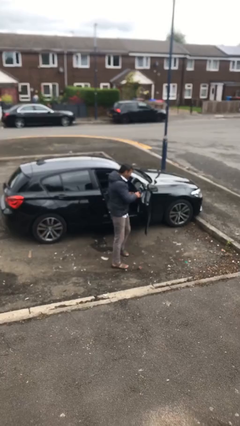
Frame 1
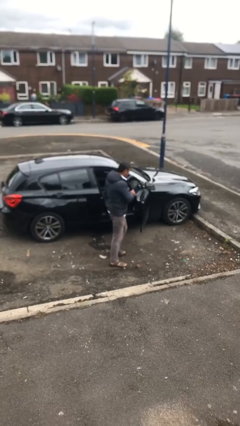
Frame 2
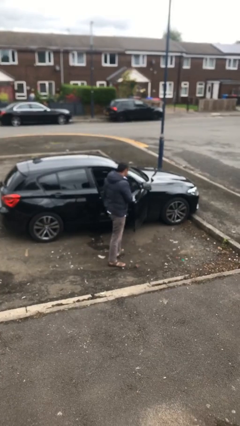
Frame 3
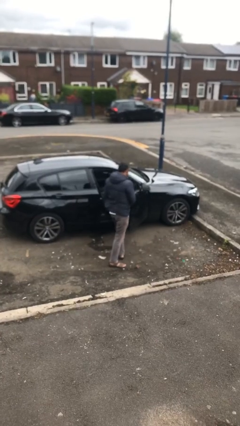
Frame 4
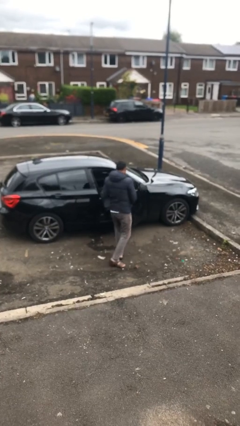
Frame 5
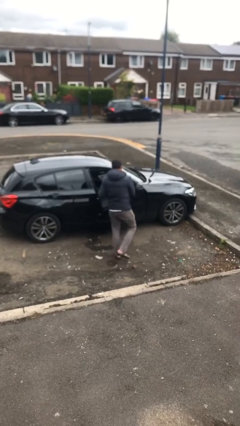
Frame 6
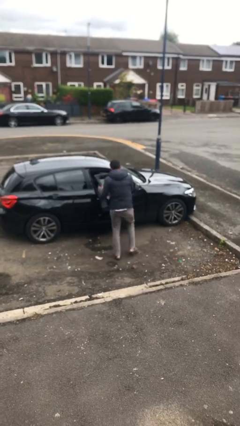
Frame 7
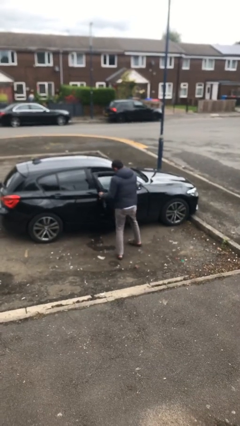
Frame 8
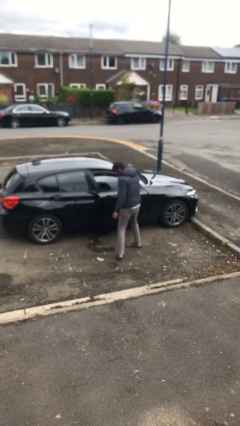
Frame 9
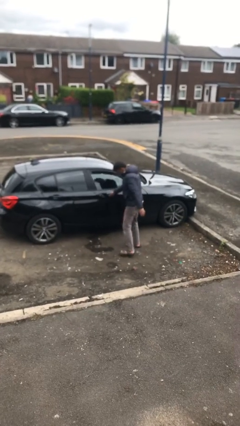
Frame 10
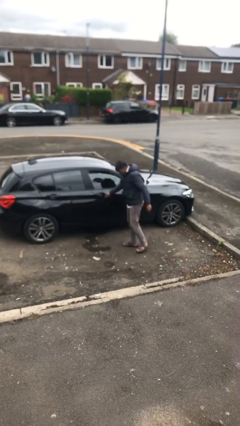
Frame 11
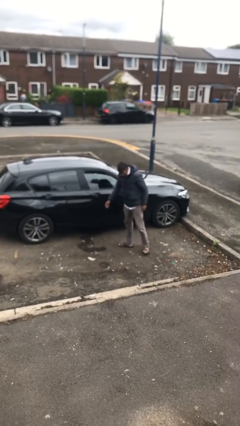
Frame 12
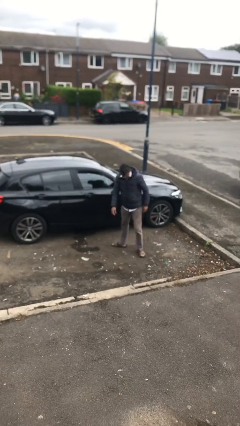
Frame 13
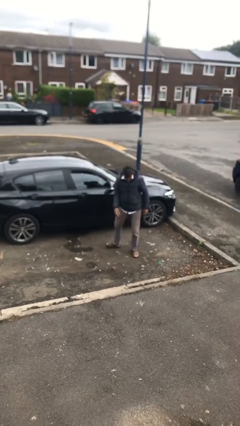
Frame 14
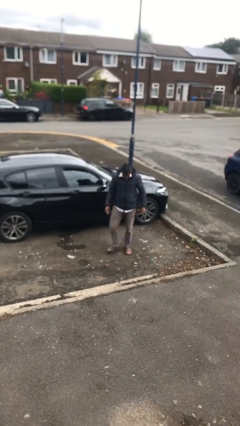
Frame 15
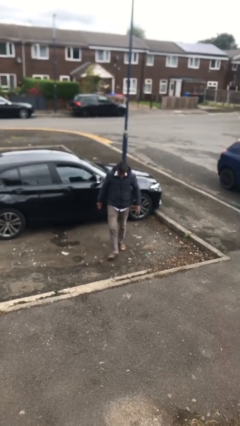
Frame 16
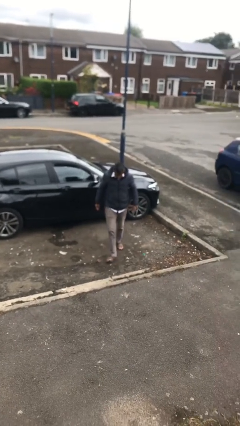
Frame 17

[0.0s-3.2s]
person closes car door

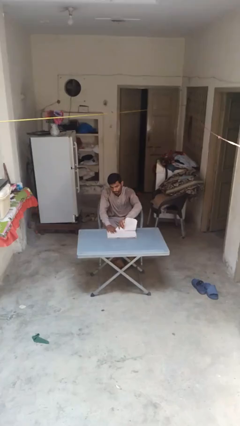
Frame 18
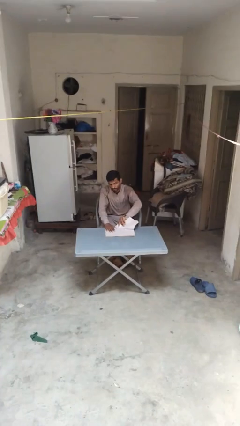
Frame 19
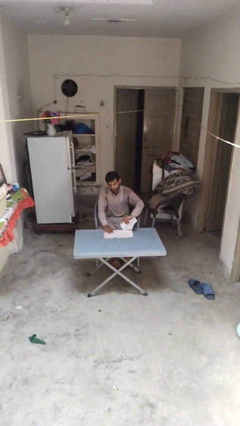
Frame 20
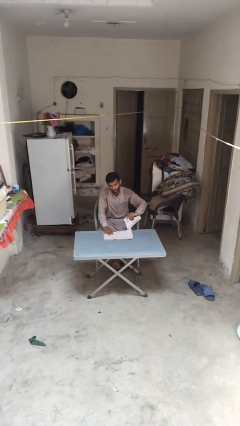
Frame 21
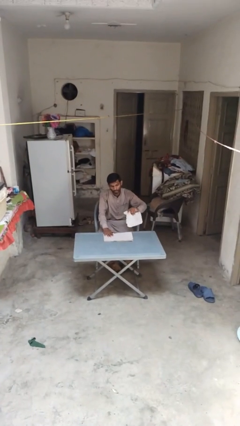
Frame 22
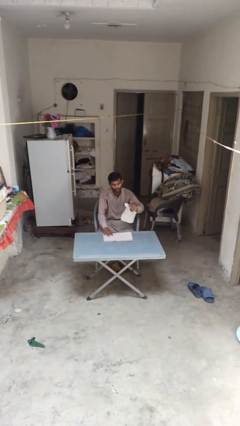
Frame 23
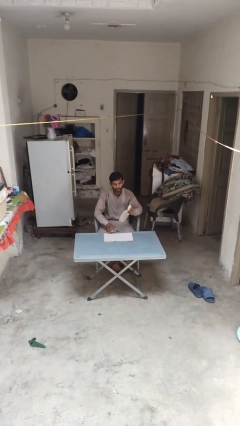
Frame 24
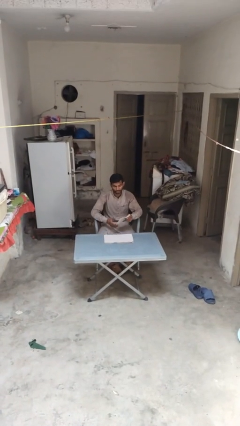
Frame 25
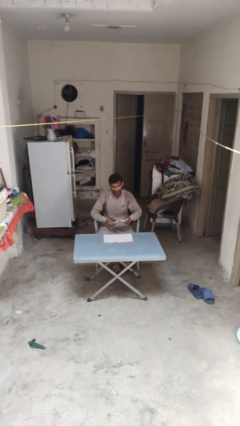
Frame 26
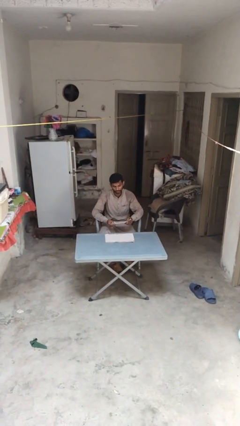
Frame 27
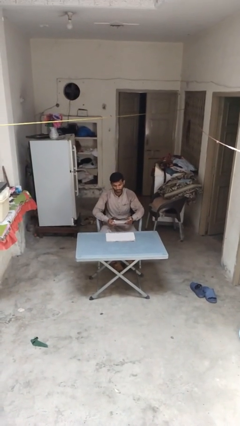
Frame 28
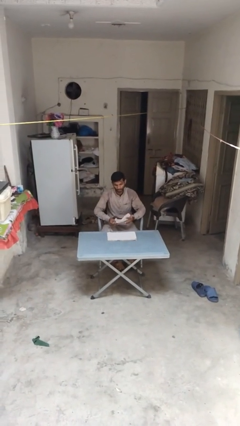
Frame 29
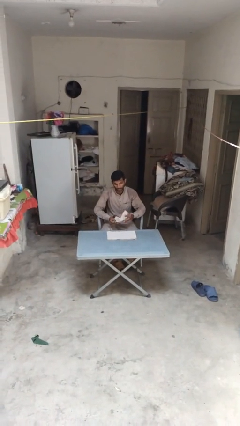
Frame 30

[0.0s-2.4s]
person tears paper

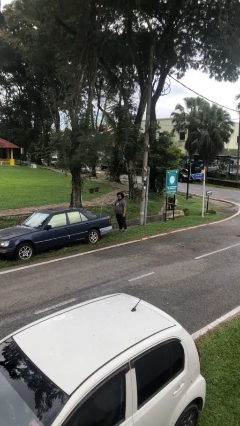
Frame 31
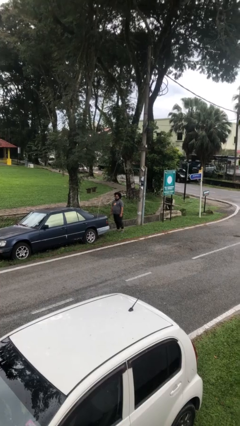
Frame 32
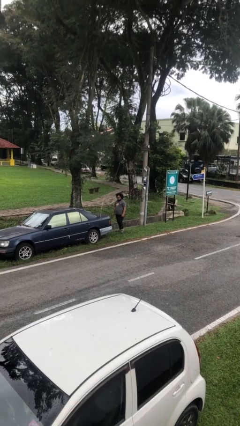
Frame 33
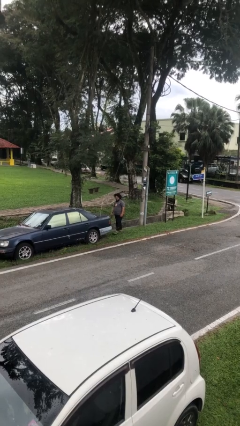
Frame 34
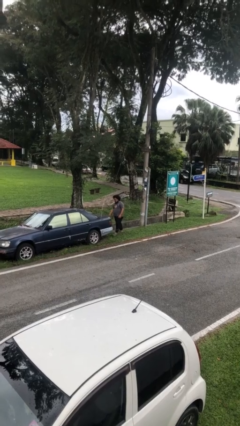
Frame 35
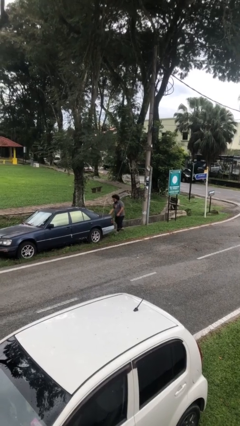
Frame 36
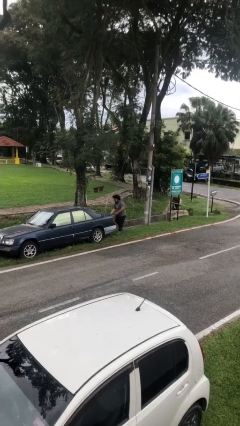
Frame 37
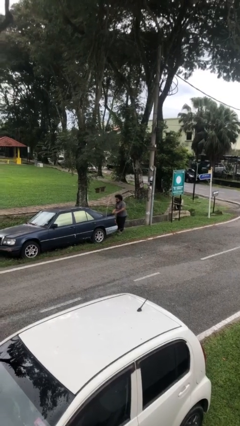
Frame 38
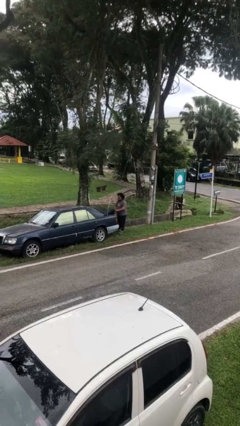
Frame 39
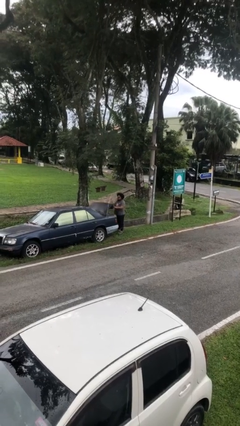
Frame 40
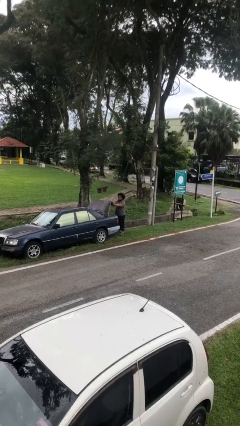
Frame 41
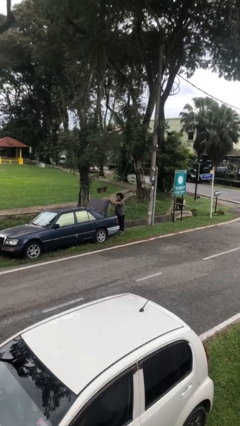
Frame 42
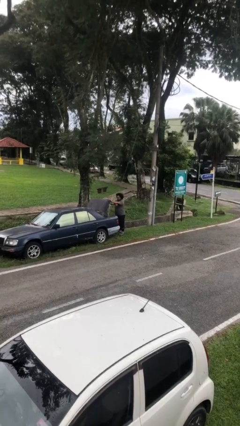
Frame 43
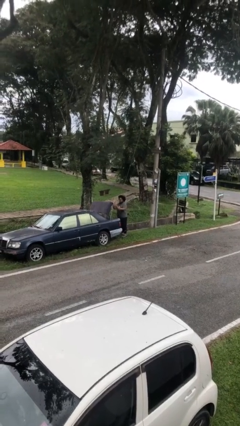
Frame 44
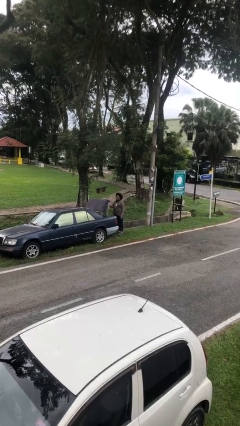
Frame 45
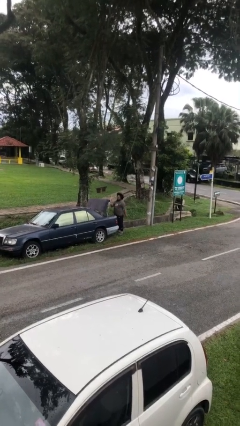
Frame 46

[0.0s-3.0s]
person opens car trunk

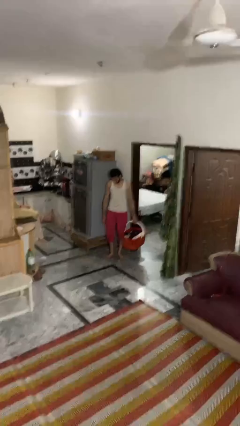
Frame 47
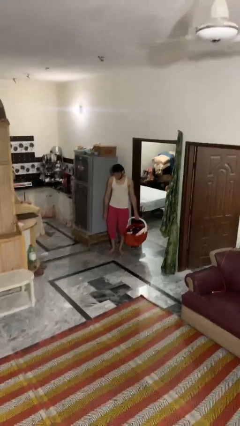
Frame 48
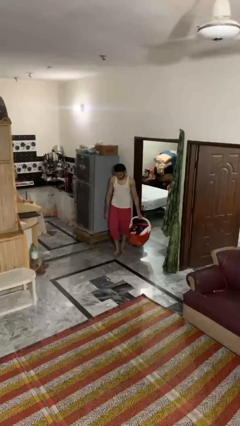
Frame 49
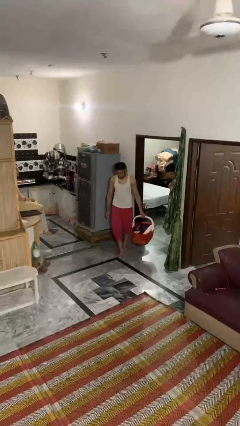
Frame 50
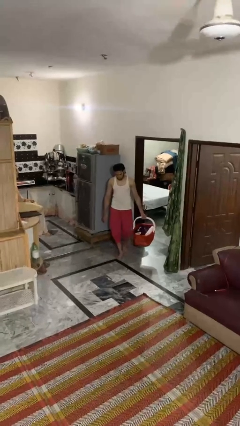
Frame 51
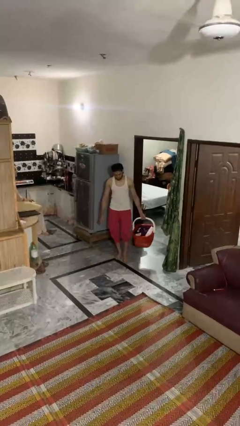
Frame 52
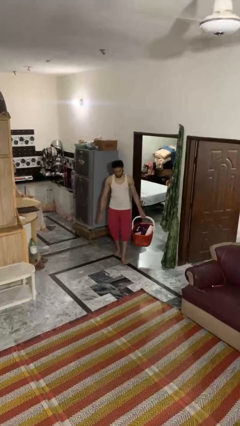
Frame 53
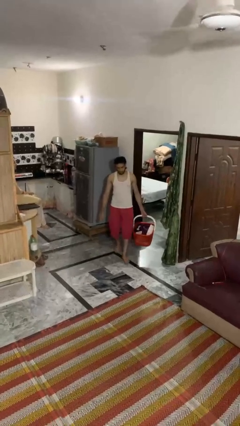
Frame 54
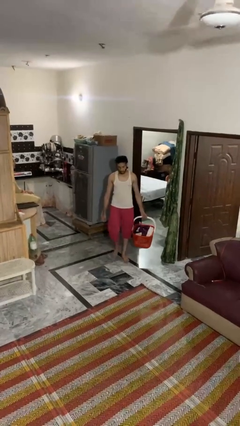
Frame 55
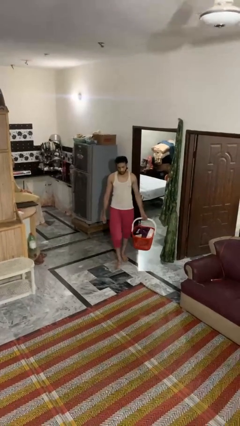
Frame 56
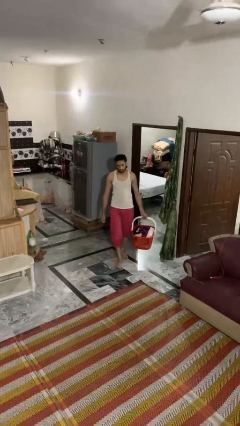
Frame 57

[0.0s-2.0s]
person carries laundry basket

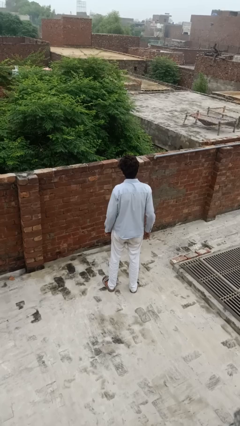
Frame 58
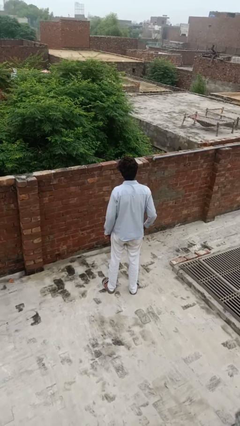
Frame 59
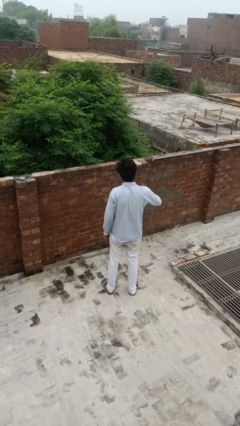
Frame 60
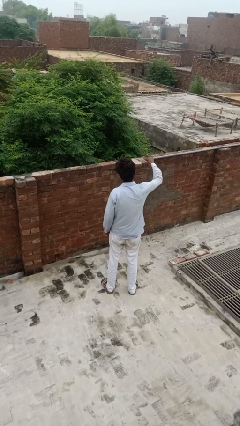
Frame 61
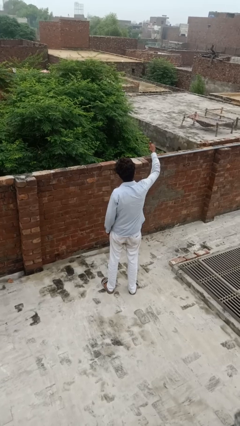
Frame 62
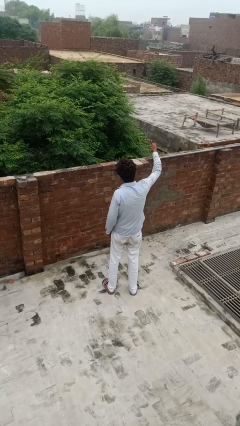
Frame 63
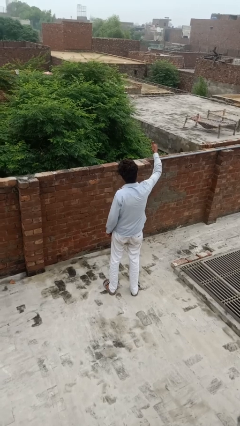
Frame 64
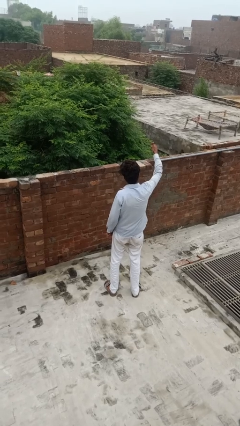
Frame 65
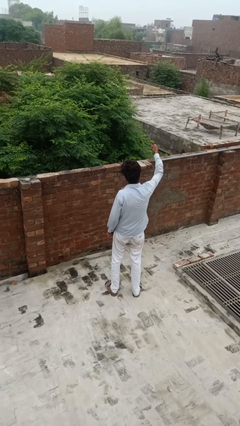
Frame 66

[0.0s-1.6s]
person gestures thumbs up

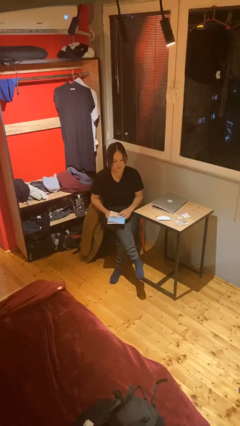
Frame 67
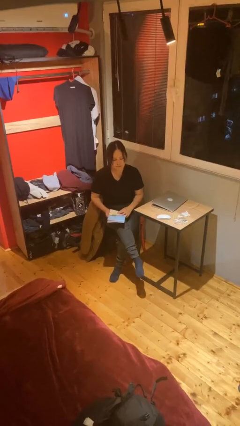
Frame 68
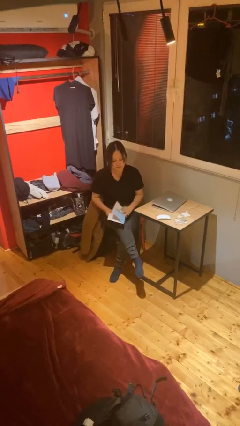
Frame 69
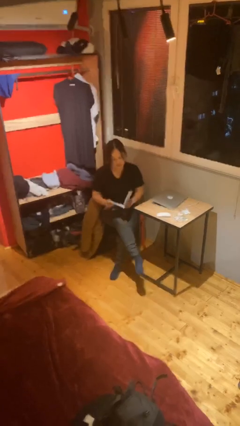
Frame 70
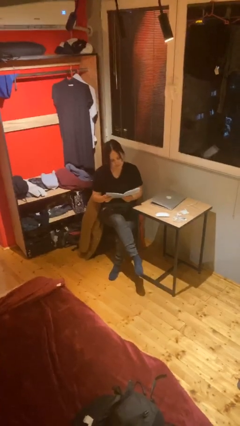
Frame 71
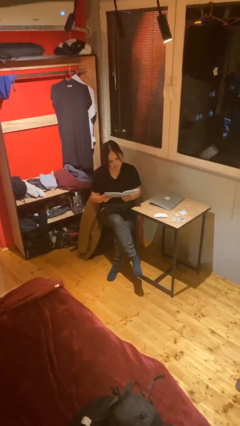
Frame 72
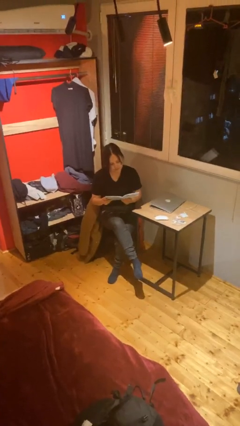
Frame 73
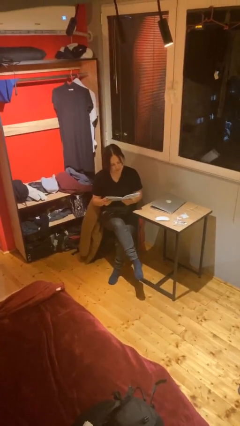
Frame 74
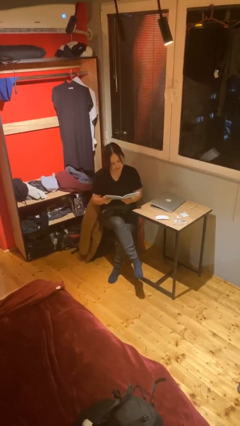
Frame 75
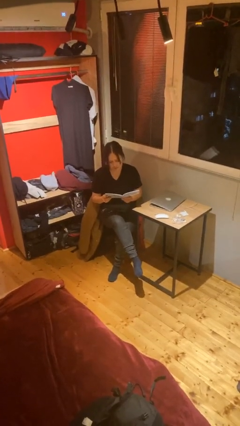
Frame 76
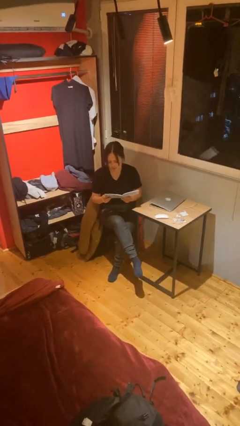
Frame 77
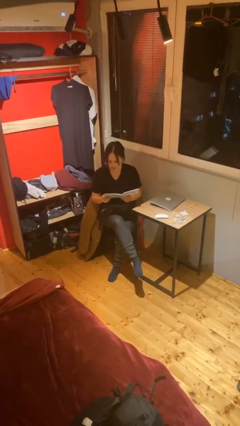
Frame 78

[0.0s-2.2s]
person reads document

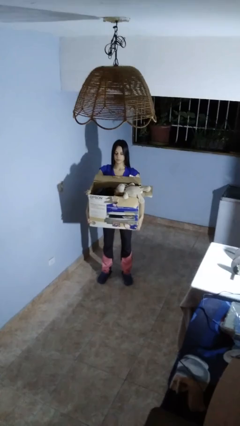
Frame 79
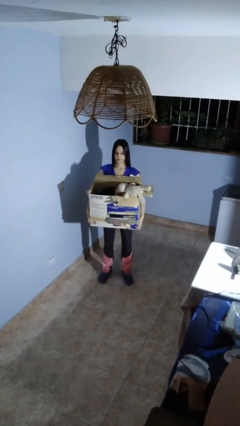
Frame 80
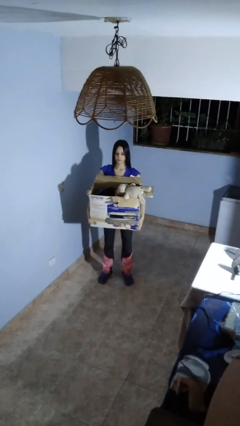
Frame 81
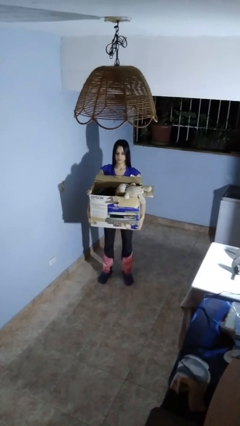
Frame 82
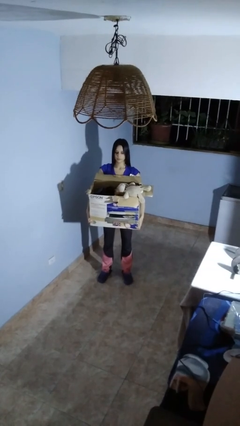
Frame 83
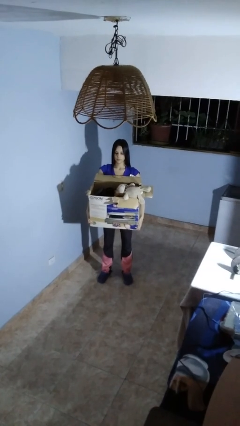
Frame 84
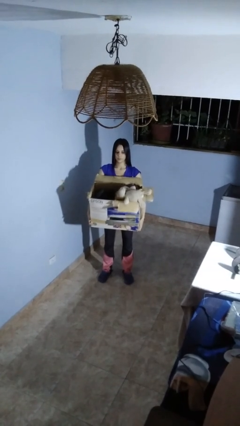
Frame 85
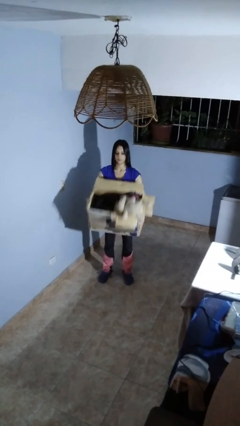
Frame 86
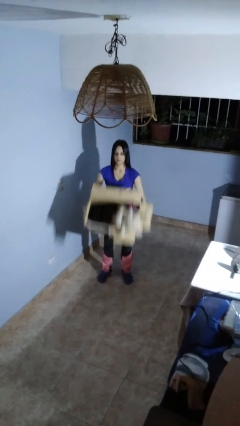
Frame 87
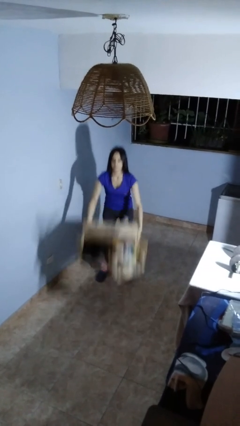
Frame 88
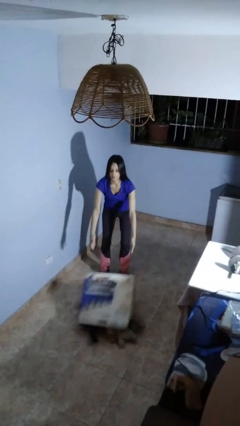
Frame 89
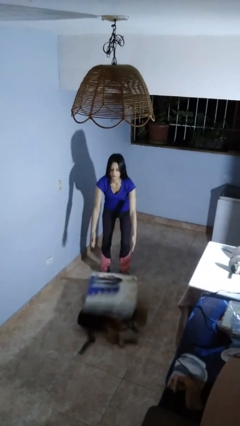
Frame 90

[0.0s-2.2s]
person unloads box onto floor

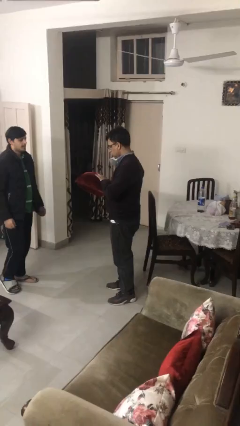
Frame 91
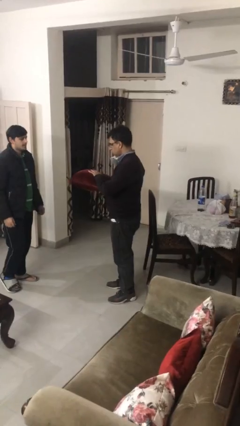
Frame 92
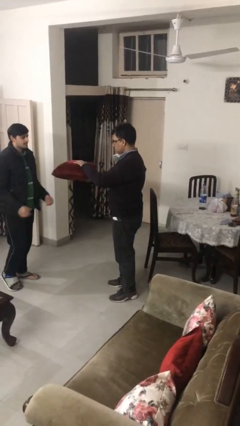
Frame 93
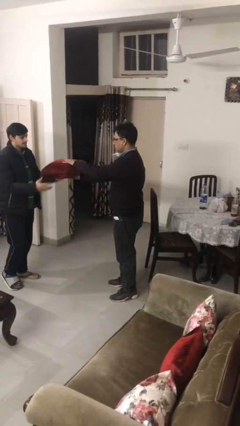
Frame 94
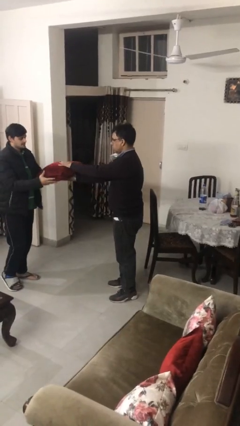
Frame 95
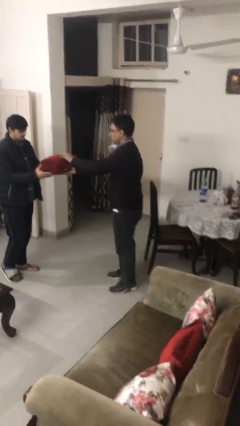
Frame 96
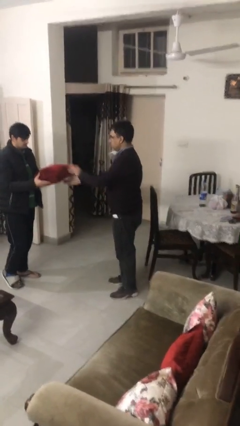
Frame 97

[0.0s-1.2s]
person transfers object to person
